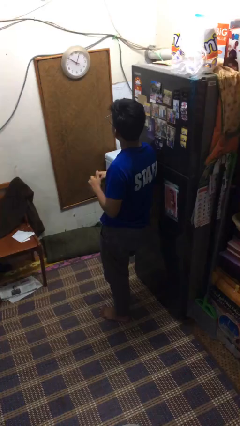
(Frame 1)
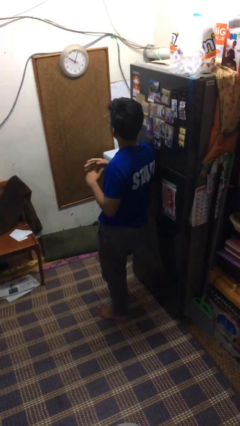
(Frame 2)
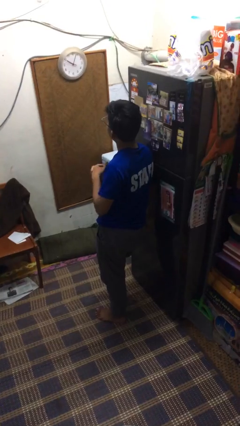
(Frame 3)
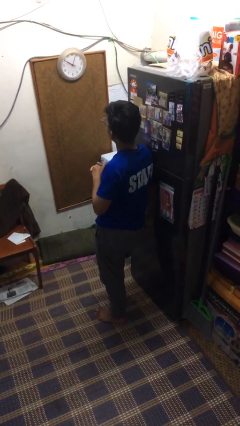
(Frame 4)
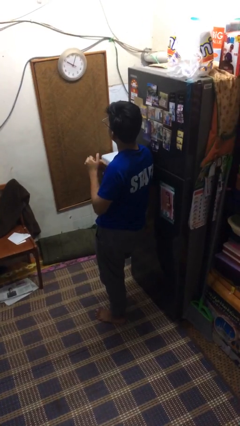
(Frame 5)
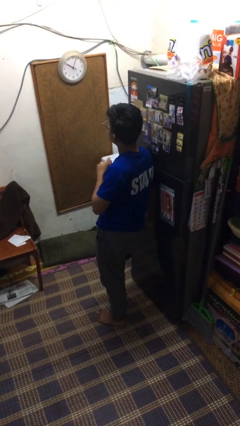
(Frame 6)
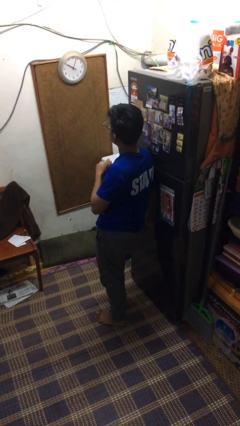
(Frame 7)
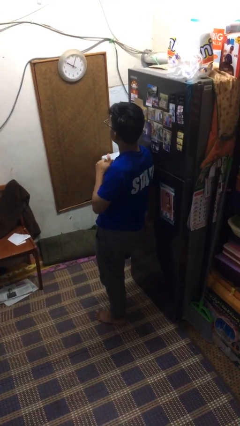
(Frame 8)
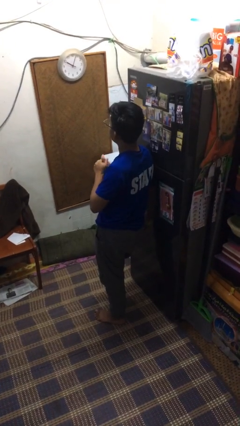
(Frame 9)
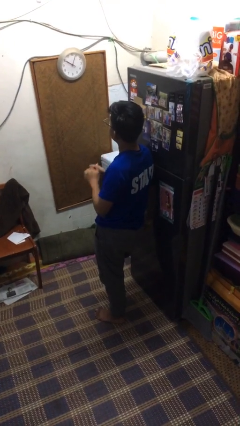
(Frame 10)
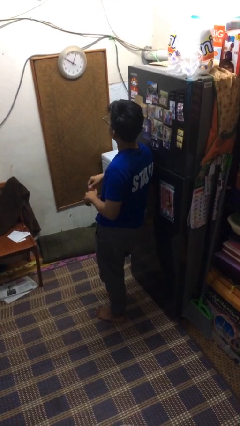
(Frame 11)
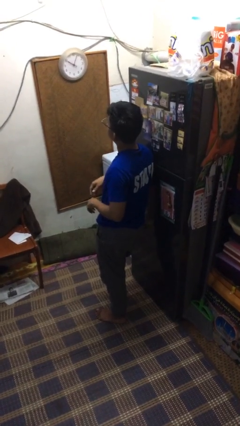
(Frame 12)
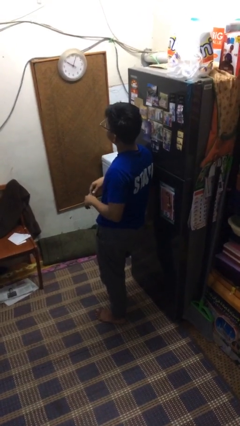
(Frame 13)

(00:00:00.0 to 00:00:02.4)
person cracks knuckles

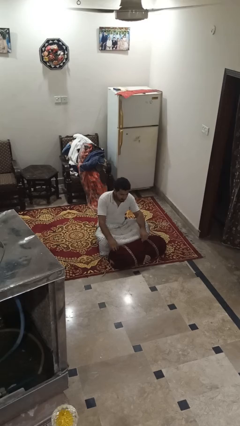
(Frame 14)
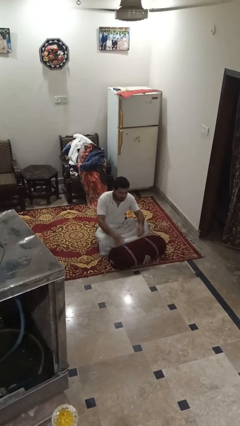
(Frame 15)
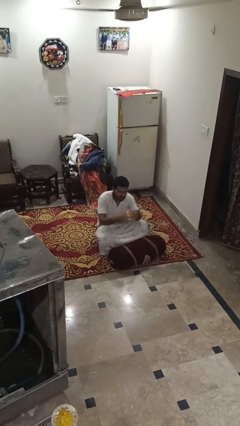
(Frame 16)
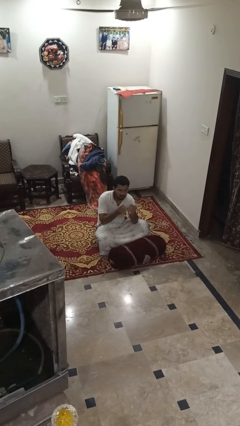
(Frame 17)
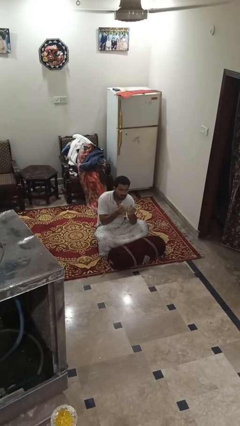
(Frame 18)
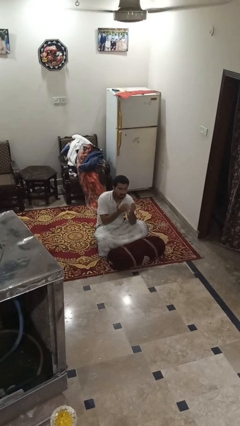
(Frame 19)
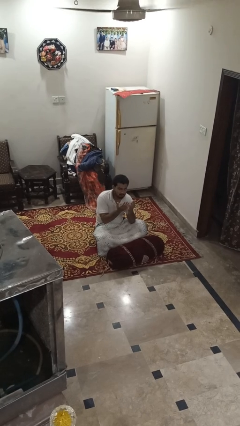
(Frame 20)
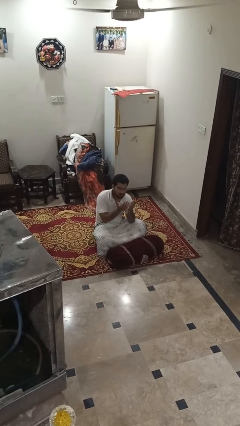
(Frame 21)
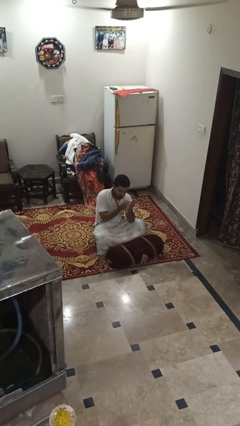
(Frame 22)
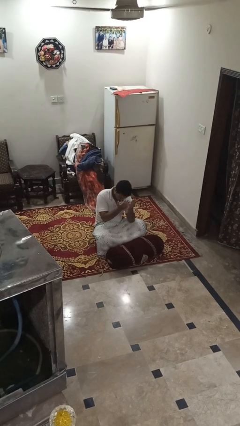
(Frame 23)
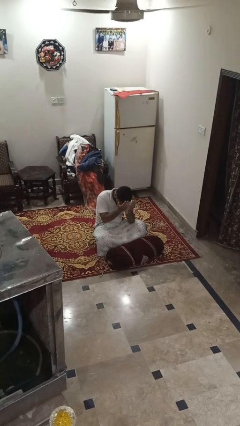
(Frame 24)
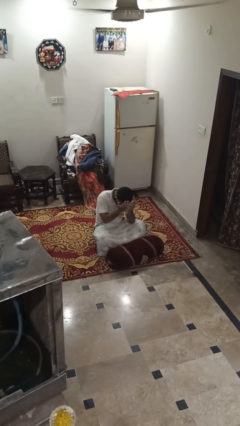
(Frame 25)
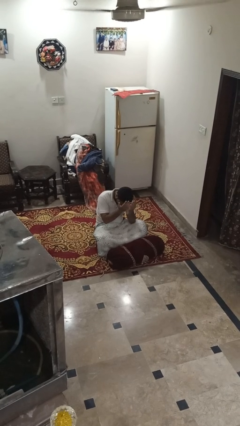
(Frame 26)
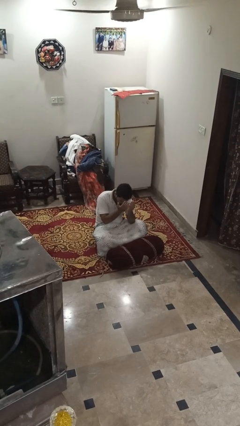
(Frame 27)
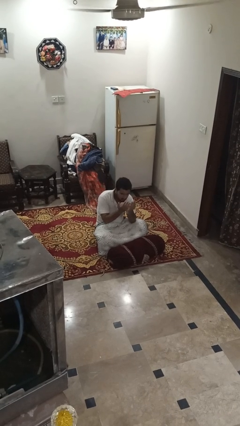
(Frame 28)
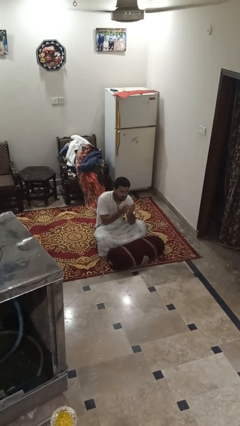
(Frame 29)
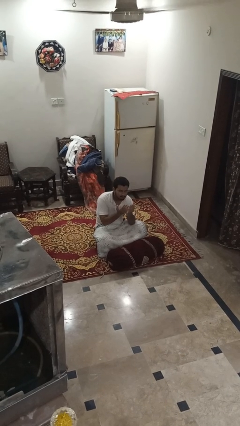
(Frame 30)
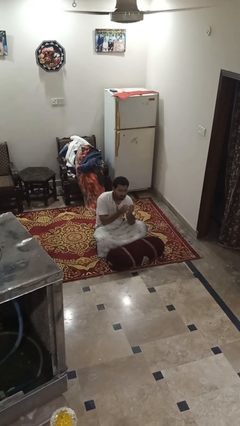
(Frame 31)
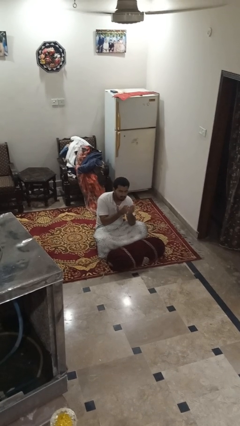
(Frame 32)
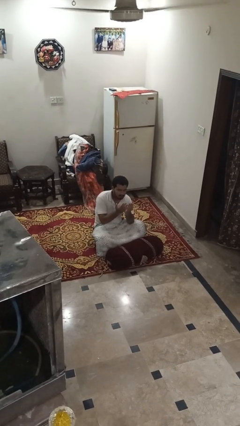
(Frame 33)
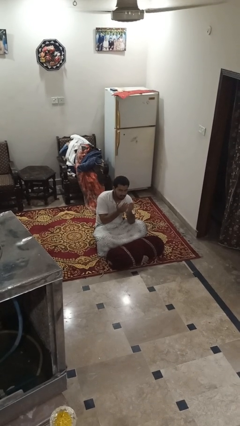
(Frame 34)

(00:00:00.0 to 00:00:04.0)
person prays

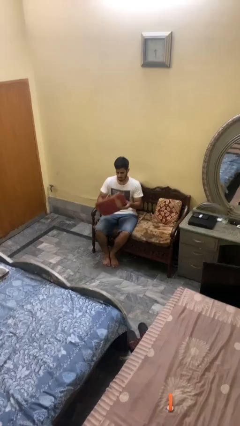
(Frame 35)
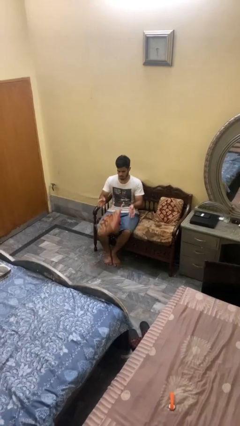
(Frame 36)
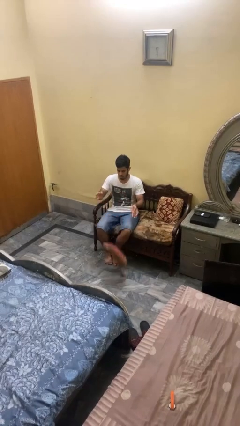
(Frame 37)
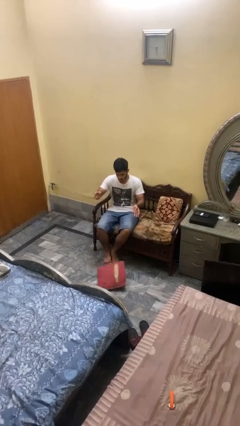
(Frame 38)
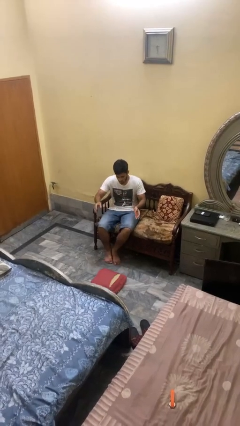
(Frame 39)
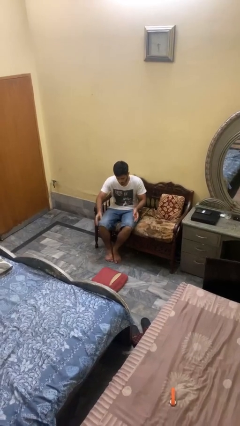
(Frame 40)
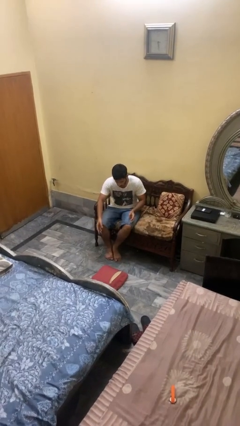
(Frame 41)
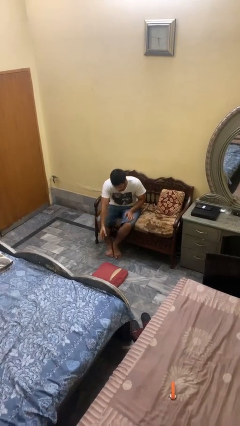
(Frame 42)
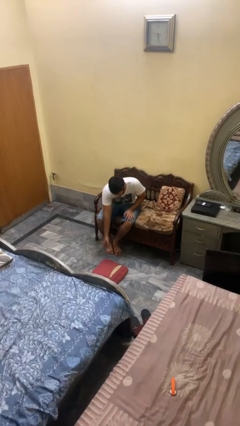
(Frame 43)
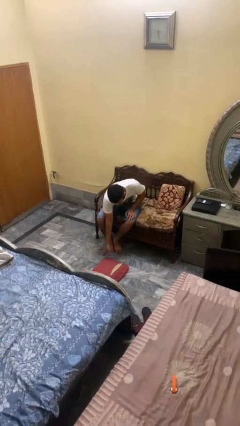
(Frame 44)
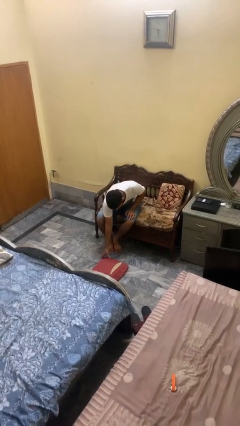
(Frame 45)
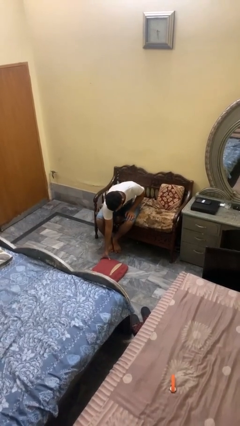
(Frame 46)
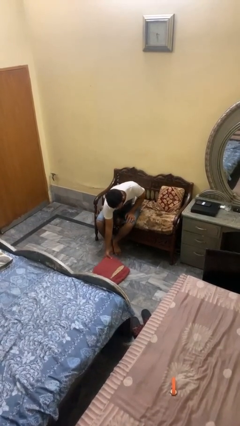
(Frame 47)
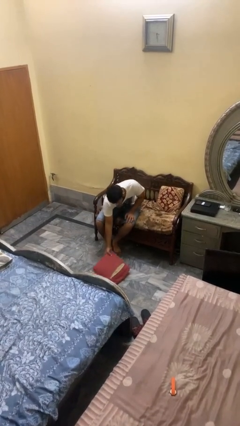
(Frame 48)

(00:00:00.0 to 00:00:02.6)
person drops object

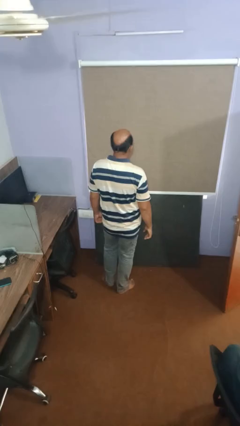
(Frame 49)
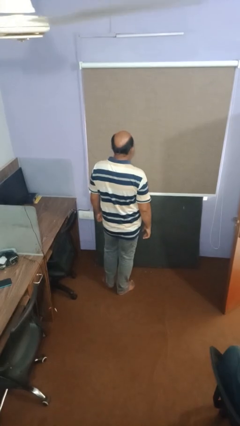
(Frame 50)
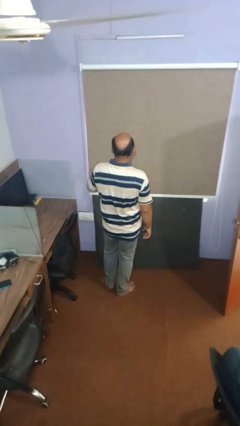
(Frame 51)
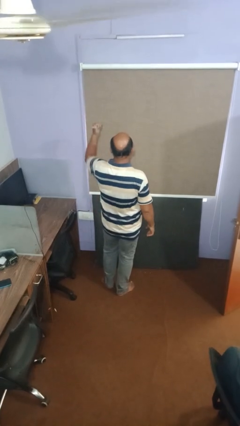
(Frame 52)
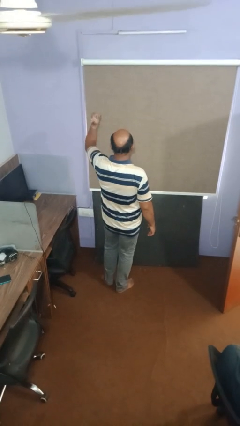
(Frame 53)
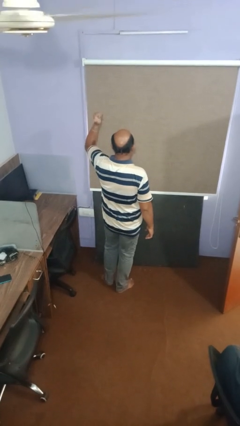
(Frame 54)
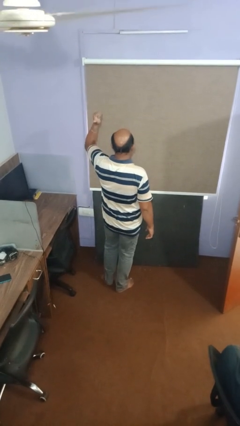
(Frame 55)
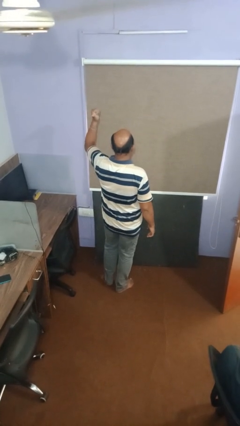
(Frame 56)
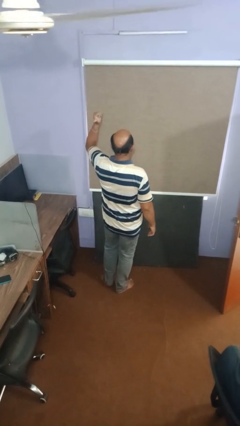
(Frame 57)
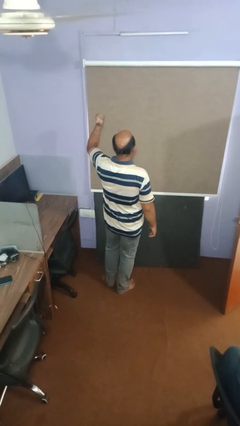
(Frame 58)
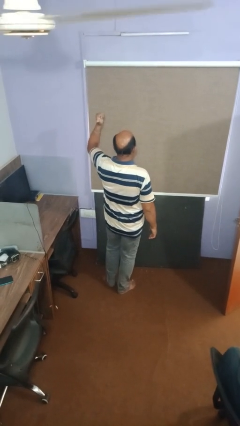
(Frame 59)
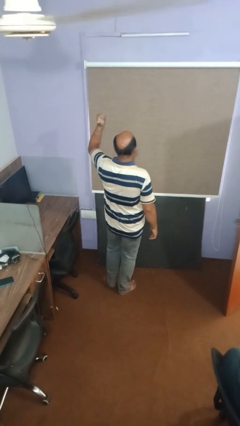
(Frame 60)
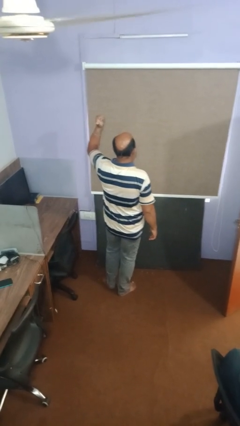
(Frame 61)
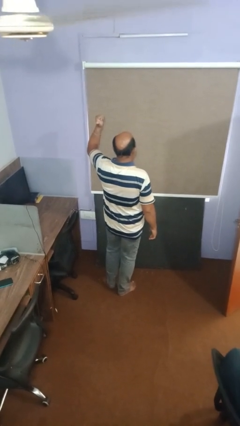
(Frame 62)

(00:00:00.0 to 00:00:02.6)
person gestures thumbs up

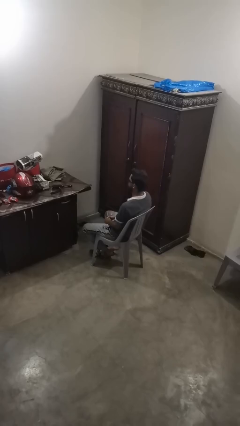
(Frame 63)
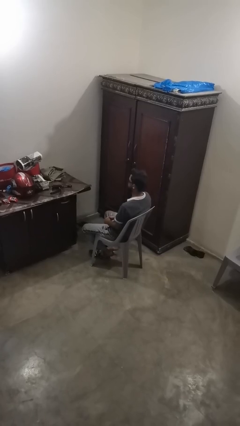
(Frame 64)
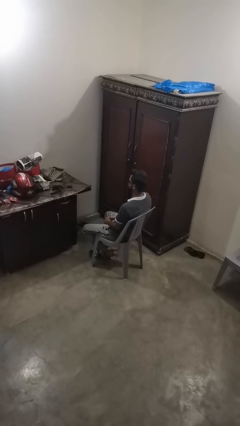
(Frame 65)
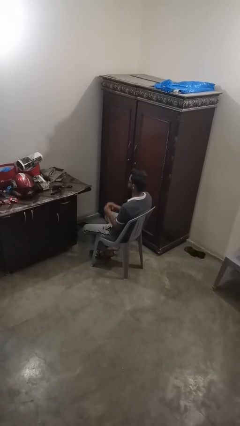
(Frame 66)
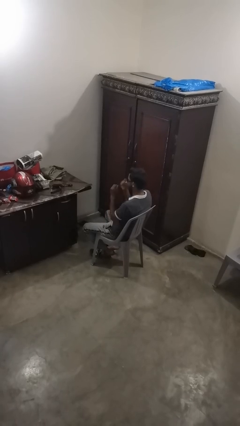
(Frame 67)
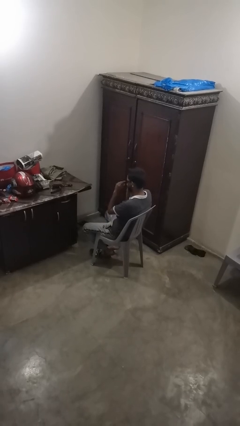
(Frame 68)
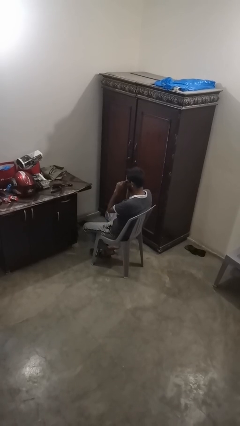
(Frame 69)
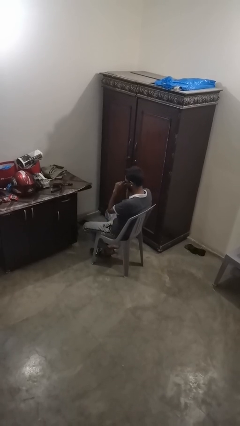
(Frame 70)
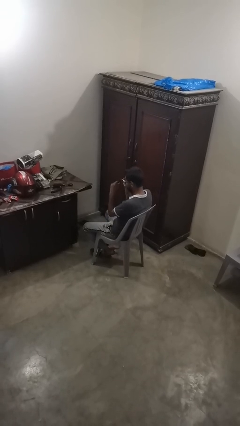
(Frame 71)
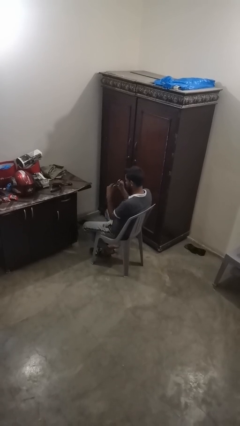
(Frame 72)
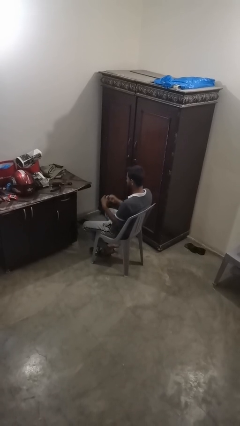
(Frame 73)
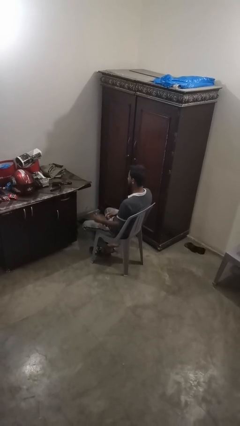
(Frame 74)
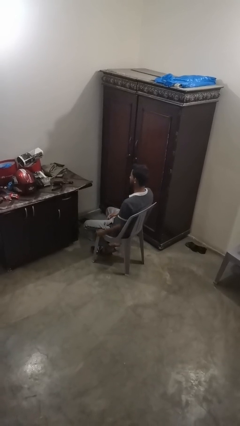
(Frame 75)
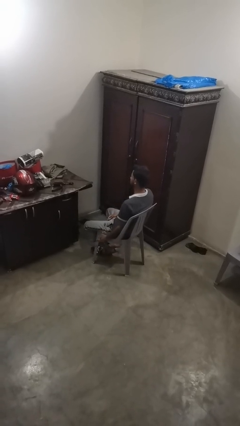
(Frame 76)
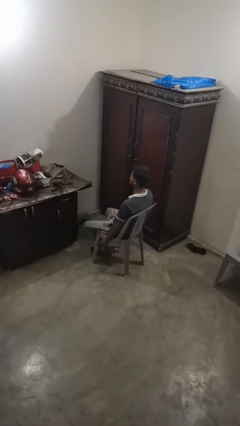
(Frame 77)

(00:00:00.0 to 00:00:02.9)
person takes off sunglasses

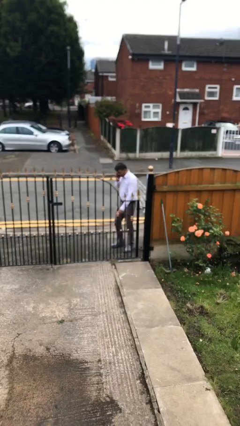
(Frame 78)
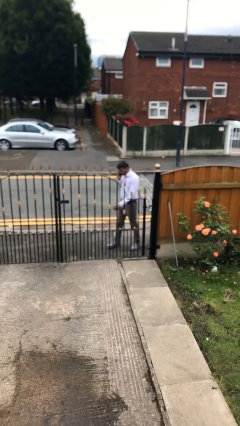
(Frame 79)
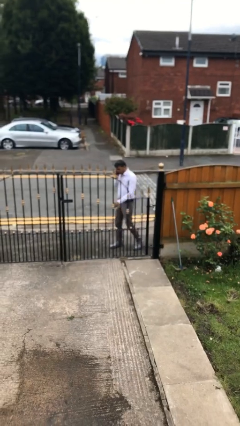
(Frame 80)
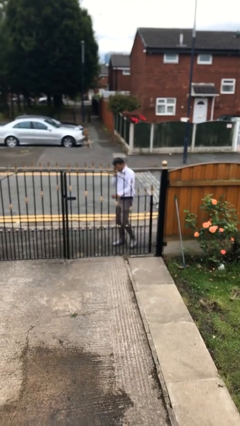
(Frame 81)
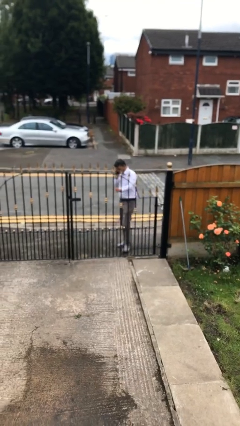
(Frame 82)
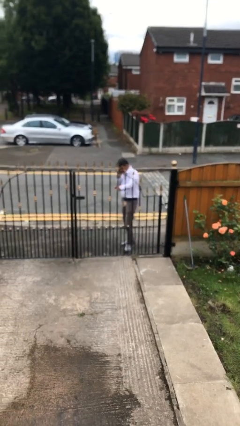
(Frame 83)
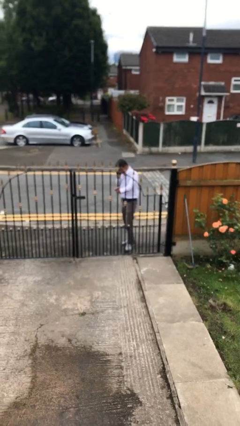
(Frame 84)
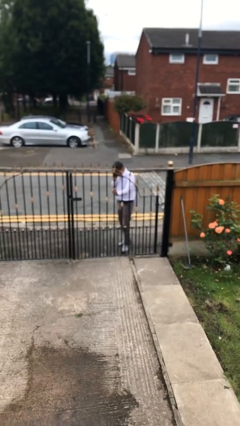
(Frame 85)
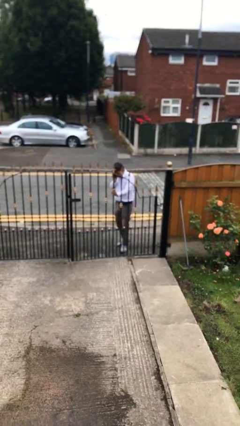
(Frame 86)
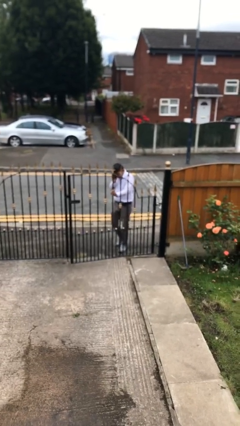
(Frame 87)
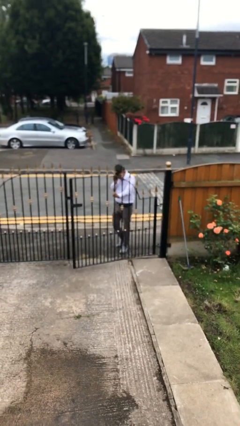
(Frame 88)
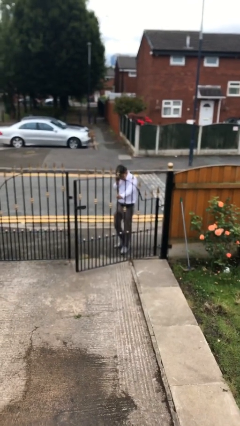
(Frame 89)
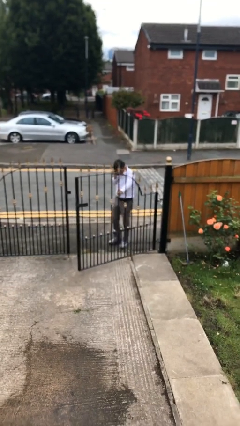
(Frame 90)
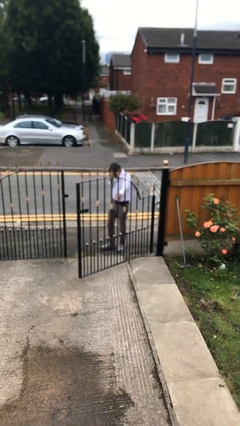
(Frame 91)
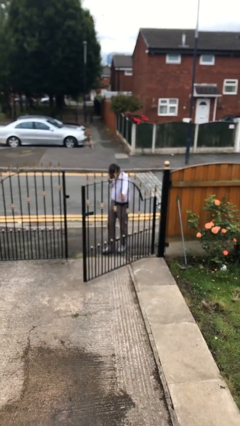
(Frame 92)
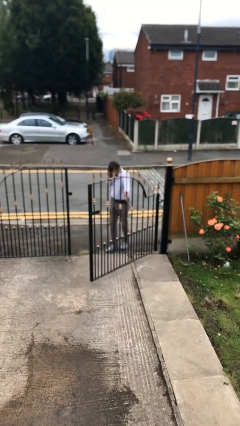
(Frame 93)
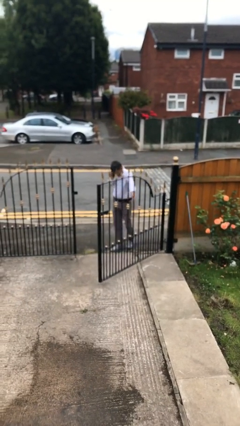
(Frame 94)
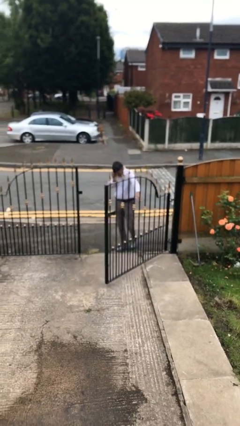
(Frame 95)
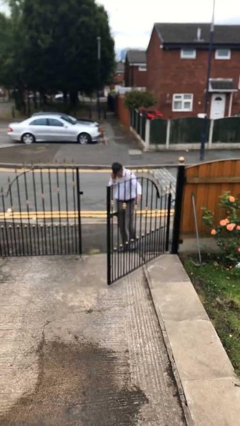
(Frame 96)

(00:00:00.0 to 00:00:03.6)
person opens facility door
